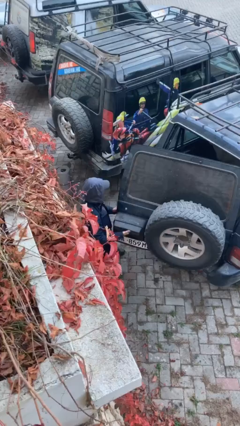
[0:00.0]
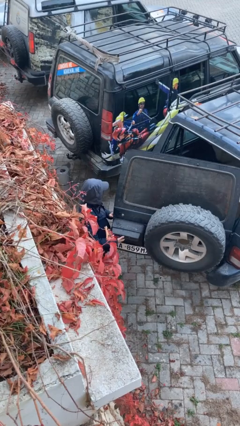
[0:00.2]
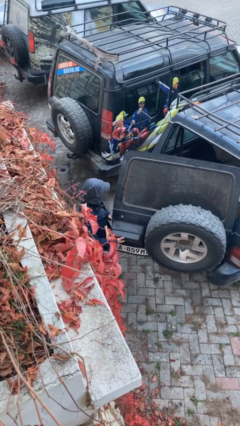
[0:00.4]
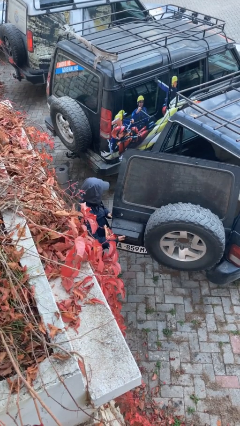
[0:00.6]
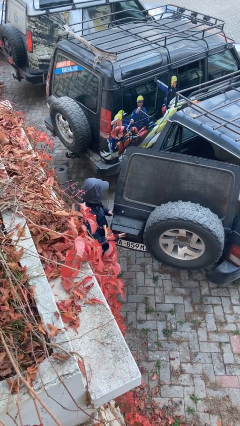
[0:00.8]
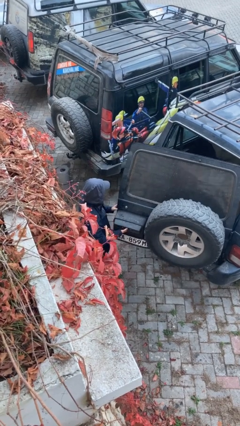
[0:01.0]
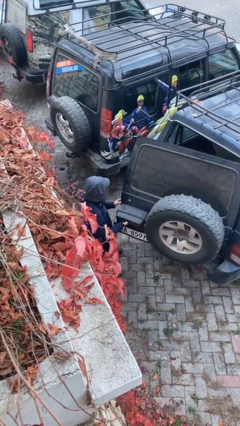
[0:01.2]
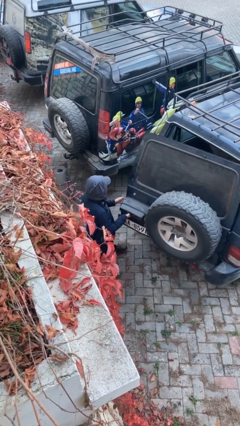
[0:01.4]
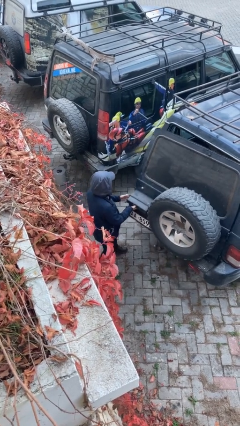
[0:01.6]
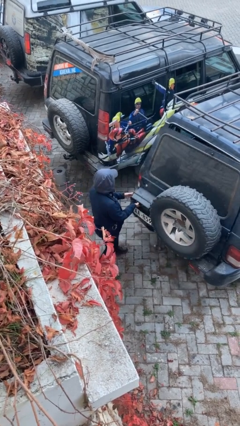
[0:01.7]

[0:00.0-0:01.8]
person closes car trunk

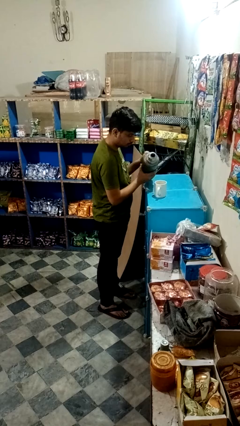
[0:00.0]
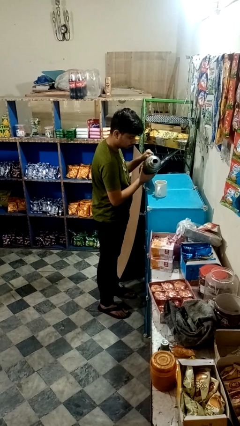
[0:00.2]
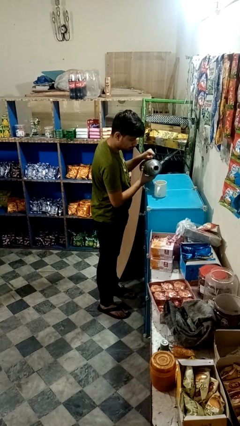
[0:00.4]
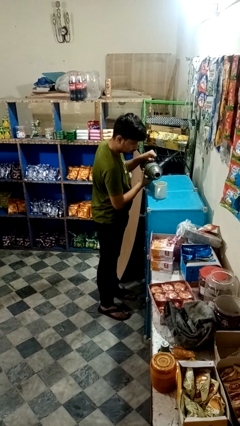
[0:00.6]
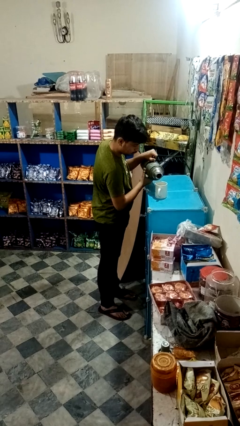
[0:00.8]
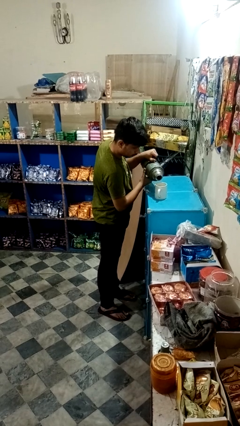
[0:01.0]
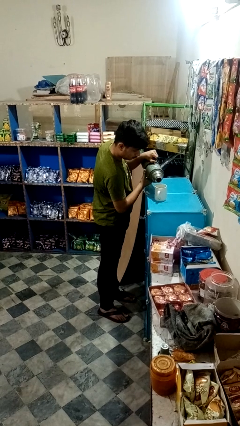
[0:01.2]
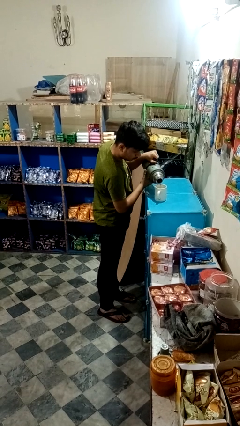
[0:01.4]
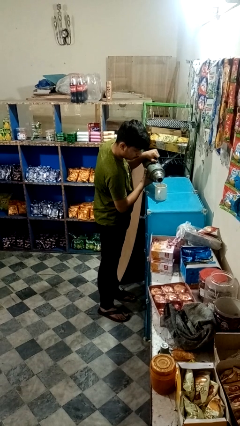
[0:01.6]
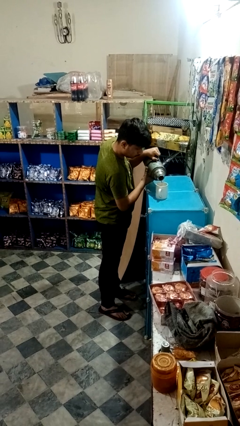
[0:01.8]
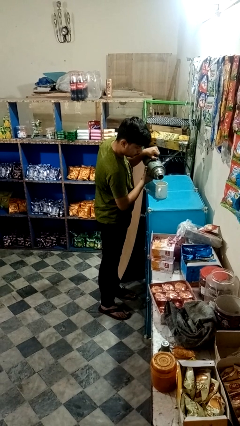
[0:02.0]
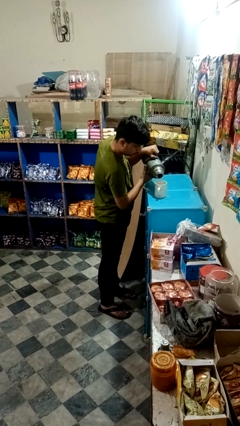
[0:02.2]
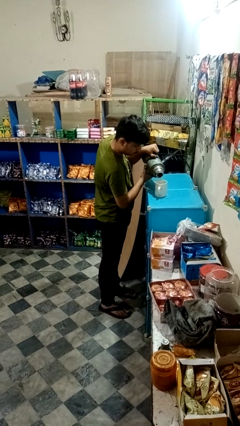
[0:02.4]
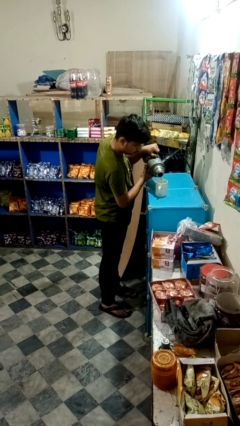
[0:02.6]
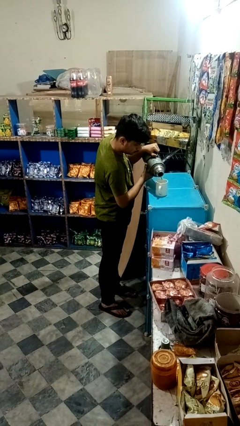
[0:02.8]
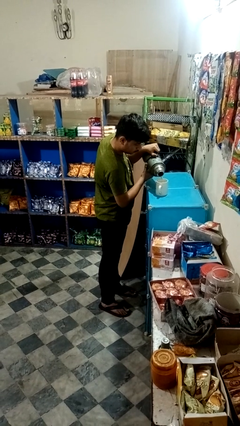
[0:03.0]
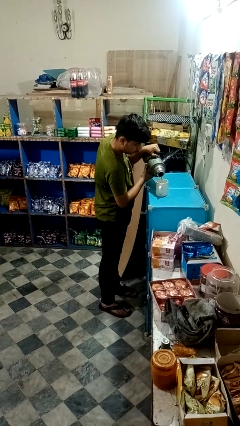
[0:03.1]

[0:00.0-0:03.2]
person pours coffee into mug

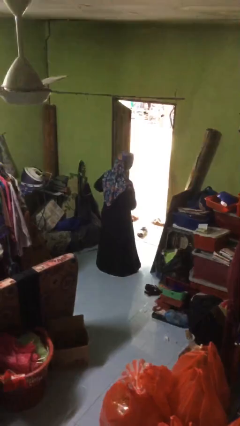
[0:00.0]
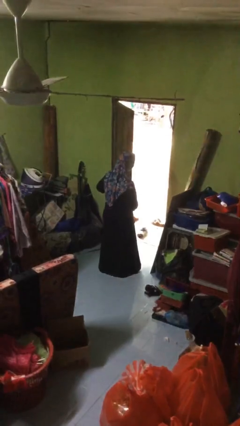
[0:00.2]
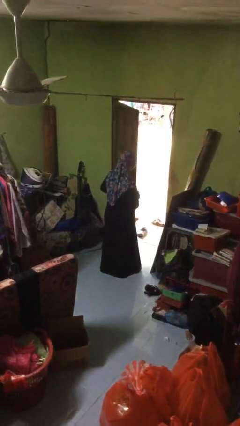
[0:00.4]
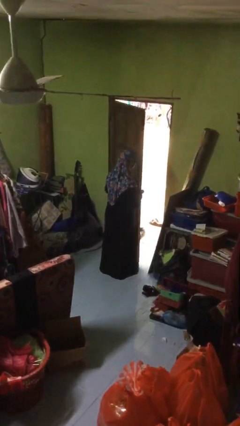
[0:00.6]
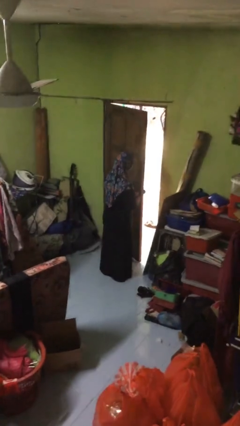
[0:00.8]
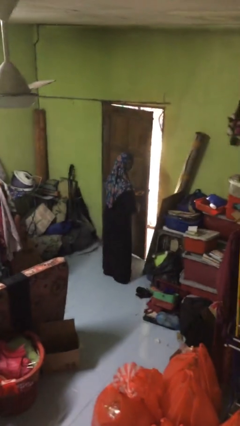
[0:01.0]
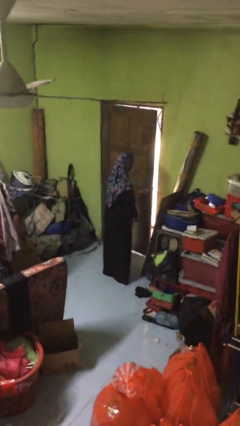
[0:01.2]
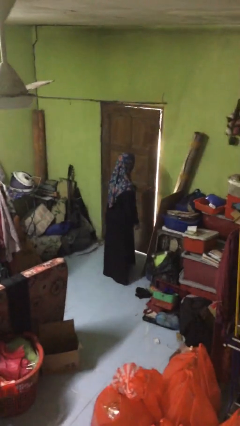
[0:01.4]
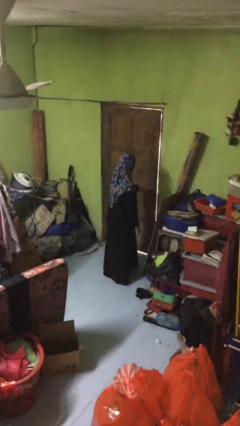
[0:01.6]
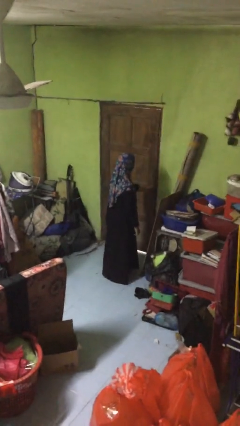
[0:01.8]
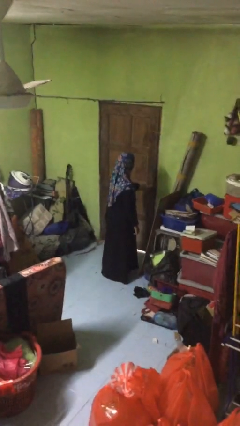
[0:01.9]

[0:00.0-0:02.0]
person closes facility door

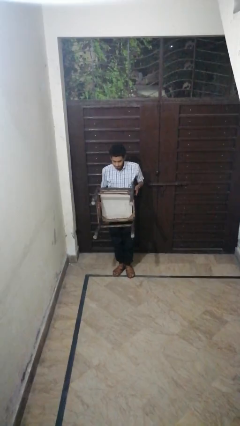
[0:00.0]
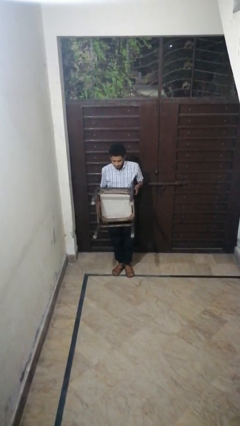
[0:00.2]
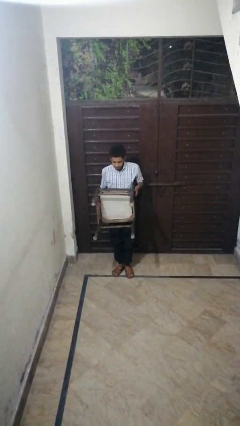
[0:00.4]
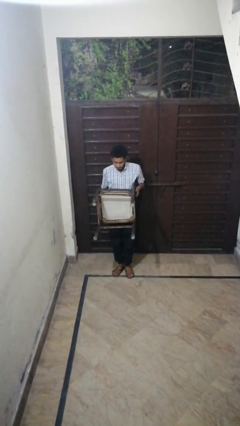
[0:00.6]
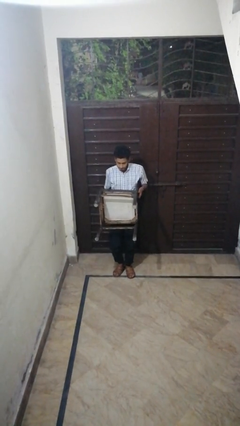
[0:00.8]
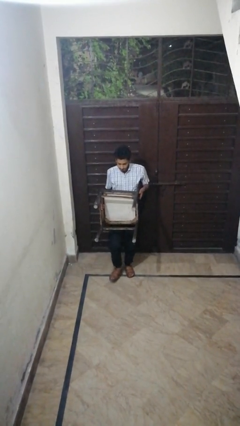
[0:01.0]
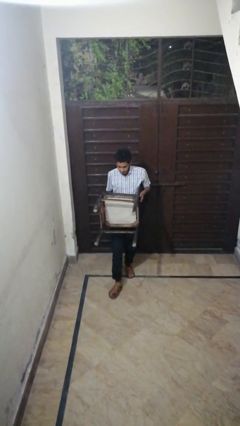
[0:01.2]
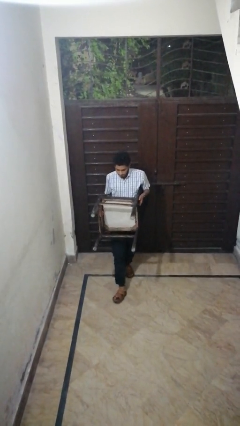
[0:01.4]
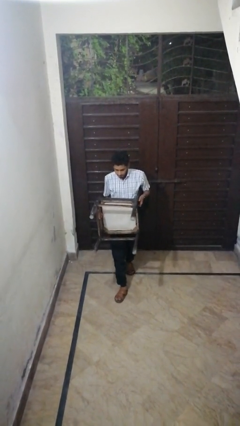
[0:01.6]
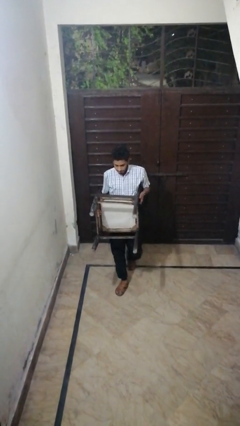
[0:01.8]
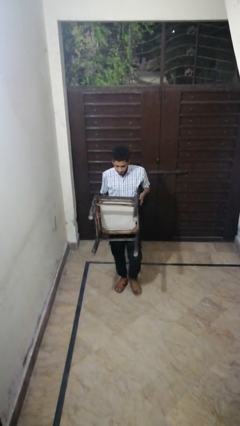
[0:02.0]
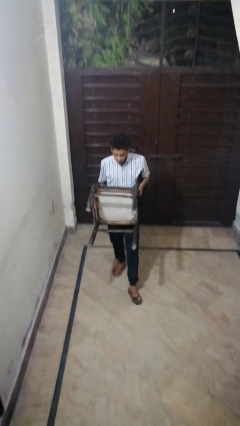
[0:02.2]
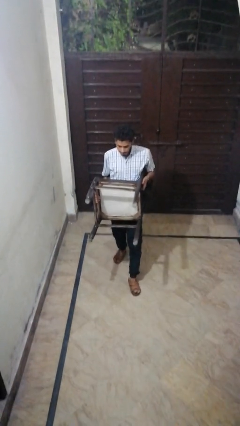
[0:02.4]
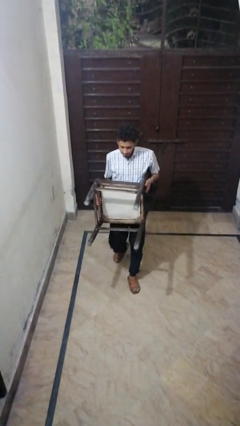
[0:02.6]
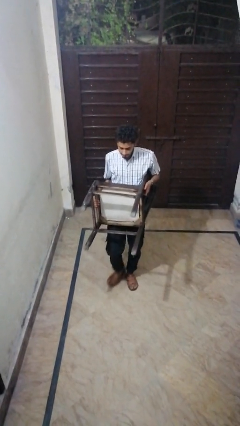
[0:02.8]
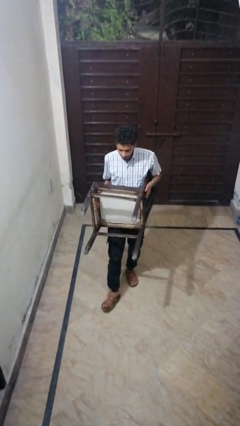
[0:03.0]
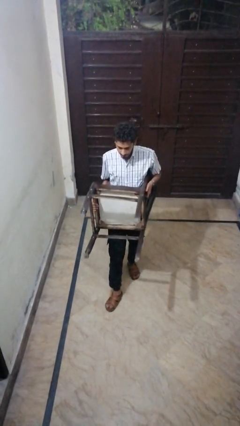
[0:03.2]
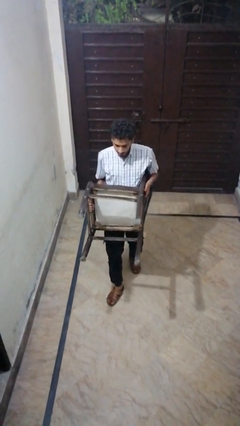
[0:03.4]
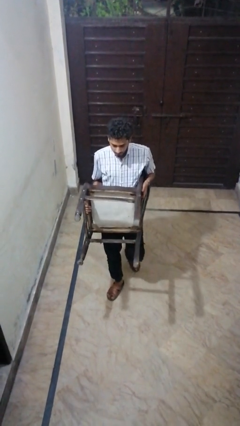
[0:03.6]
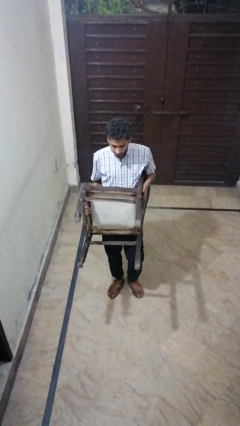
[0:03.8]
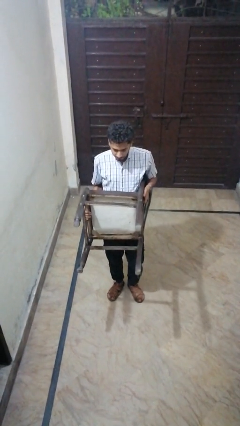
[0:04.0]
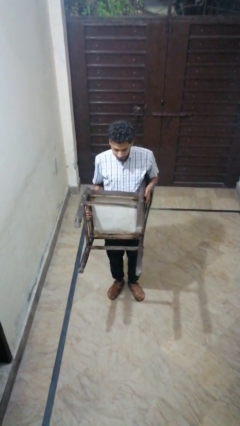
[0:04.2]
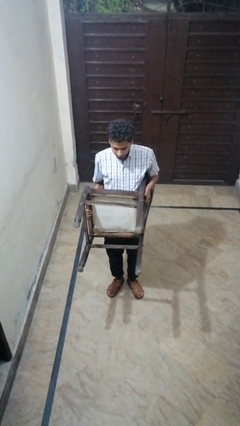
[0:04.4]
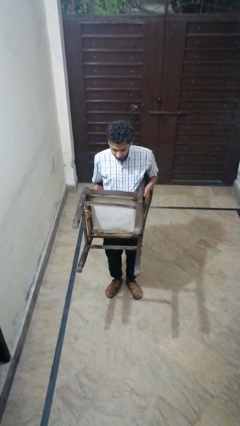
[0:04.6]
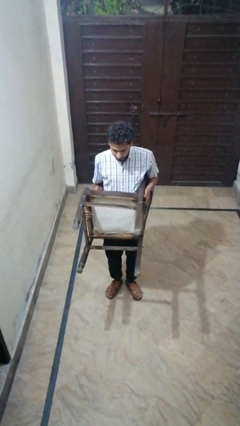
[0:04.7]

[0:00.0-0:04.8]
person carries furniture

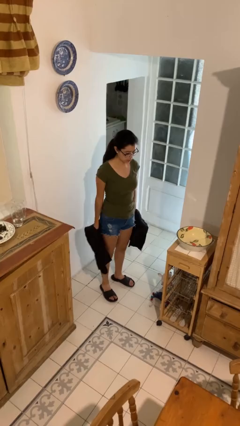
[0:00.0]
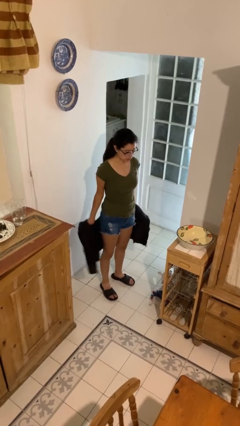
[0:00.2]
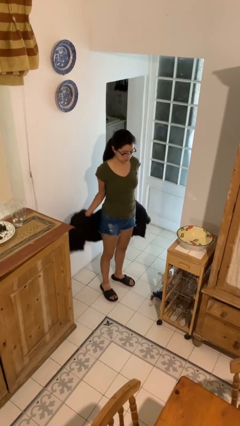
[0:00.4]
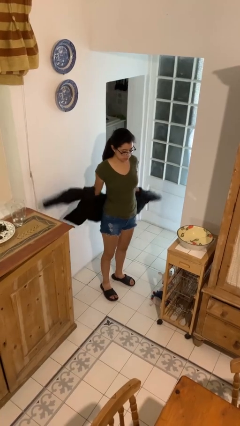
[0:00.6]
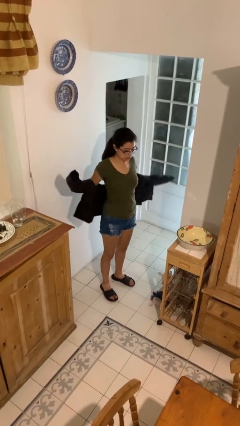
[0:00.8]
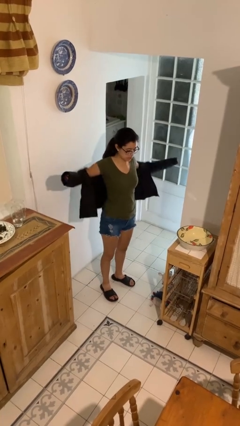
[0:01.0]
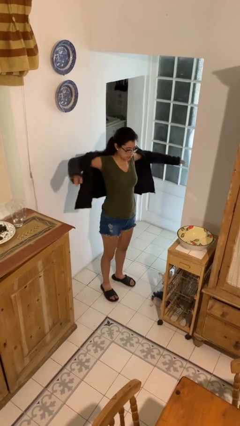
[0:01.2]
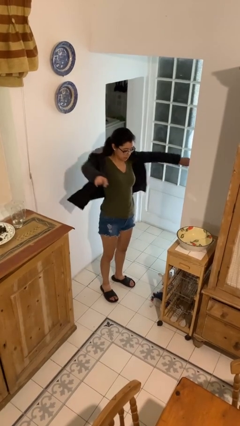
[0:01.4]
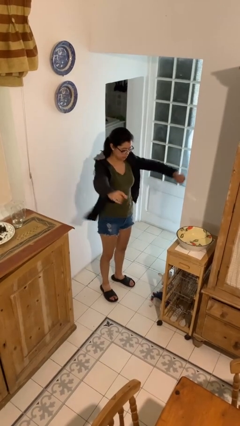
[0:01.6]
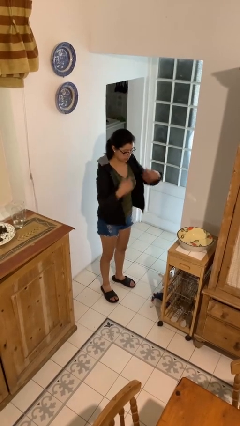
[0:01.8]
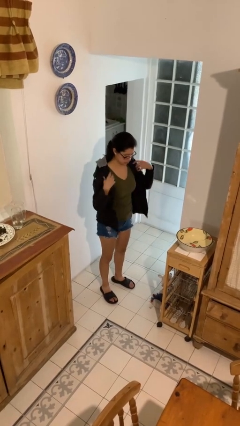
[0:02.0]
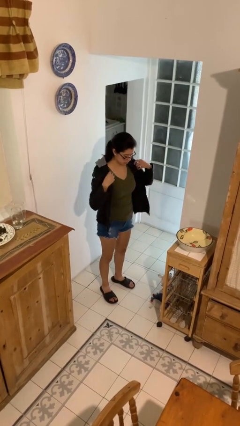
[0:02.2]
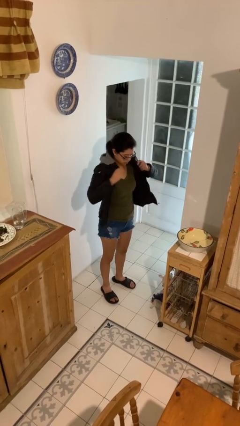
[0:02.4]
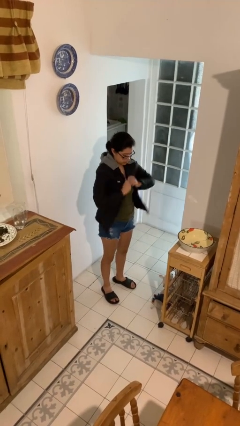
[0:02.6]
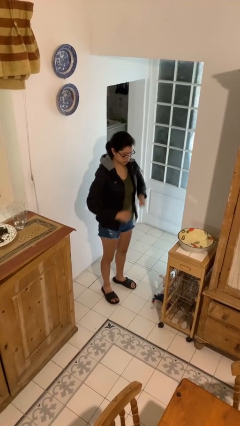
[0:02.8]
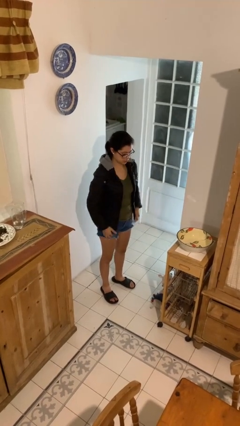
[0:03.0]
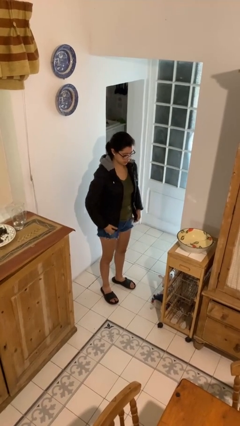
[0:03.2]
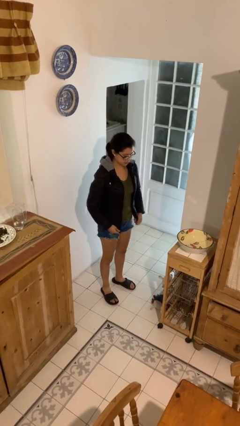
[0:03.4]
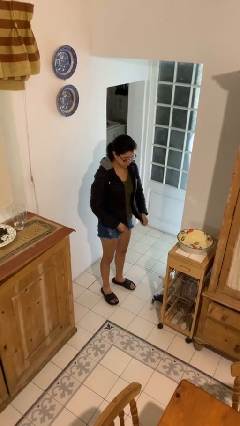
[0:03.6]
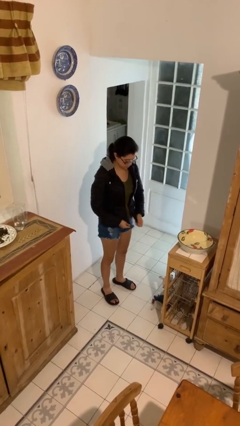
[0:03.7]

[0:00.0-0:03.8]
person puts on jacket

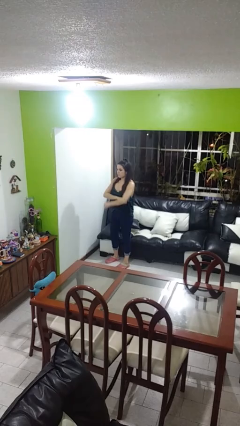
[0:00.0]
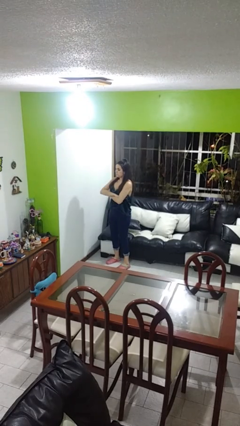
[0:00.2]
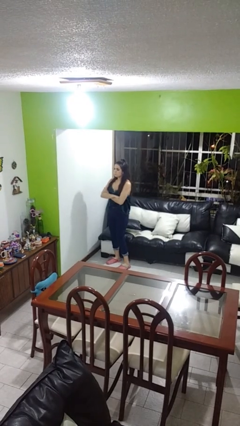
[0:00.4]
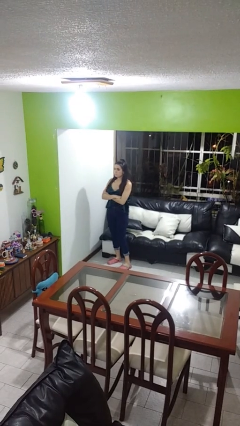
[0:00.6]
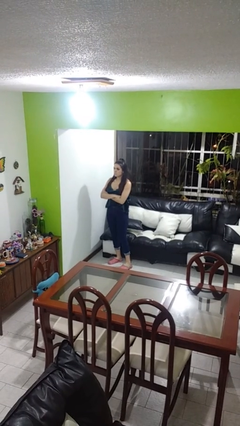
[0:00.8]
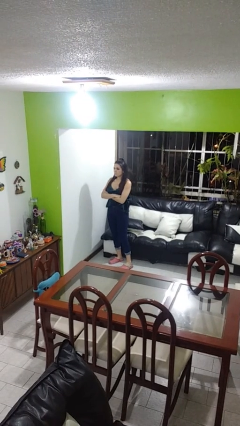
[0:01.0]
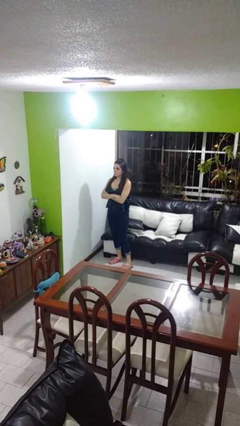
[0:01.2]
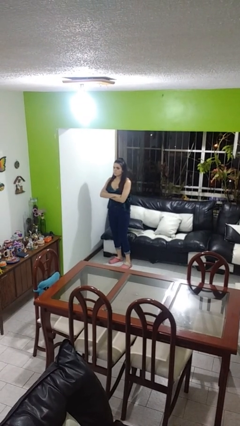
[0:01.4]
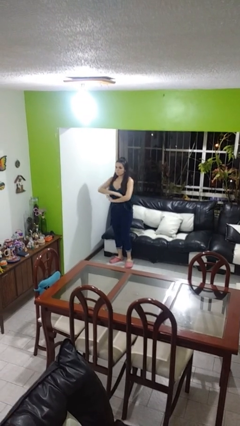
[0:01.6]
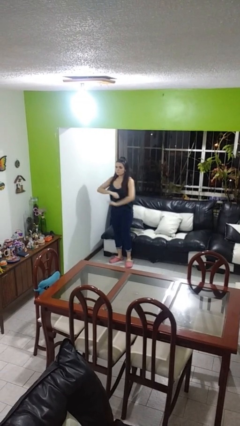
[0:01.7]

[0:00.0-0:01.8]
person crosses arms

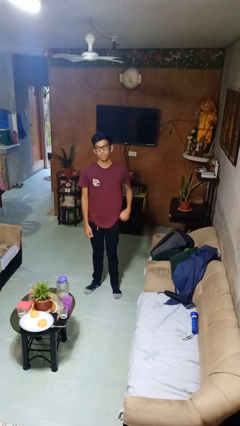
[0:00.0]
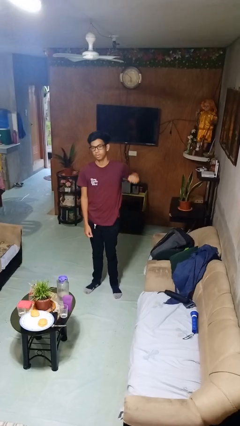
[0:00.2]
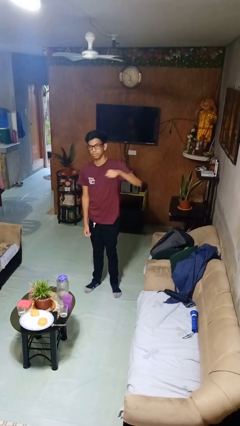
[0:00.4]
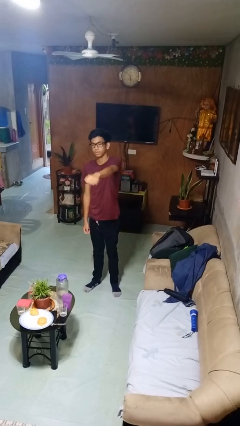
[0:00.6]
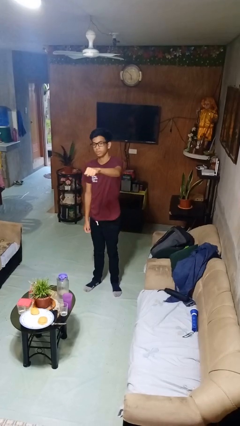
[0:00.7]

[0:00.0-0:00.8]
person punches
